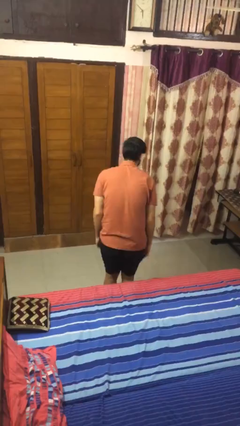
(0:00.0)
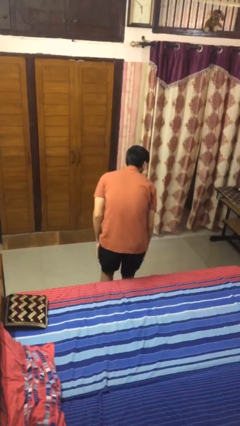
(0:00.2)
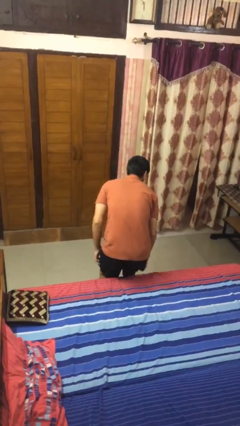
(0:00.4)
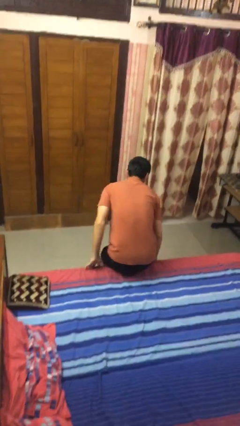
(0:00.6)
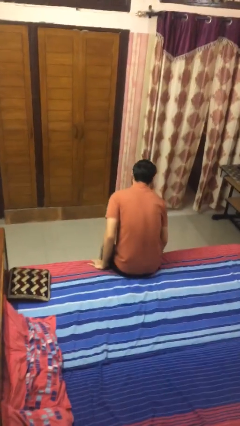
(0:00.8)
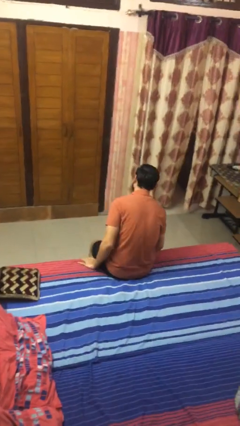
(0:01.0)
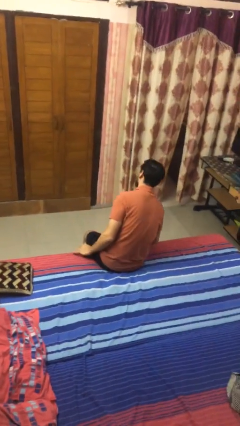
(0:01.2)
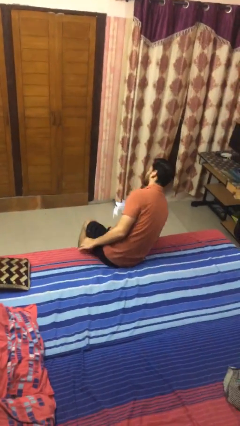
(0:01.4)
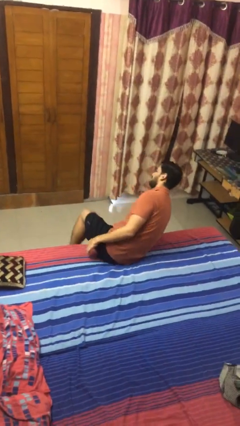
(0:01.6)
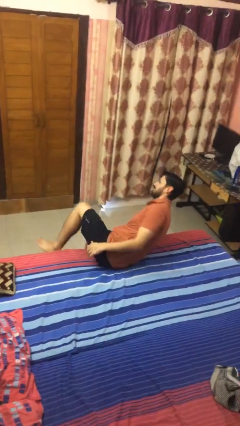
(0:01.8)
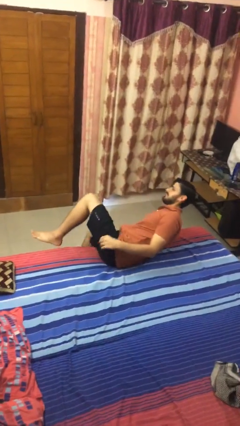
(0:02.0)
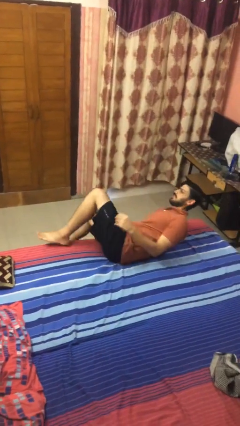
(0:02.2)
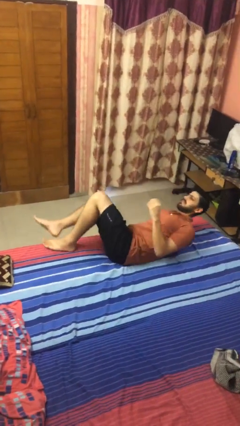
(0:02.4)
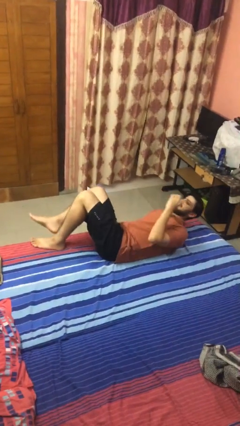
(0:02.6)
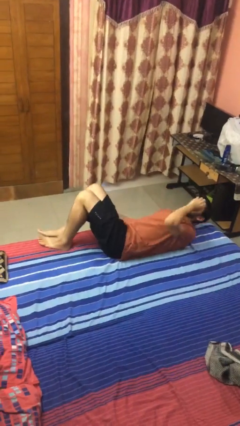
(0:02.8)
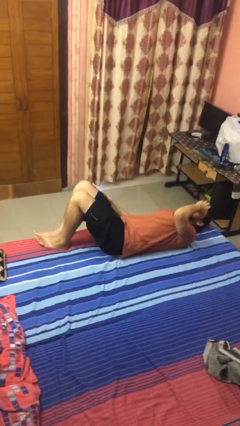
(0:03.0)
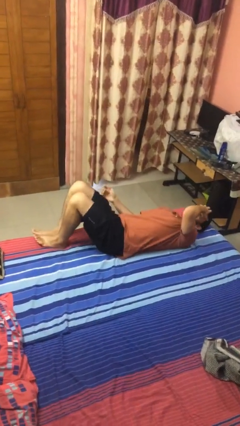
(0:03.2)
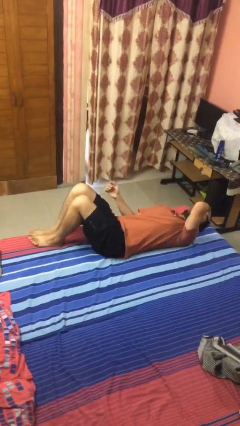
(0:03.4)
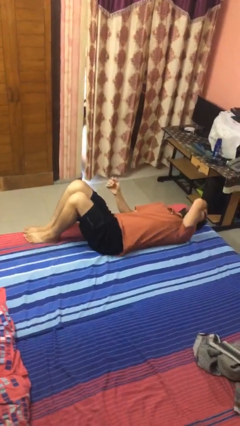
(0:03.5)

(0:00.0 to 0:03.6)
person lies down on bed

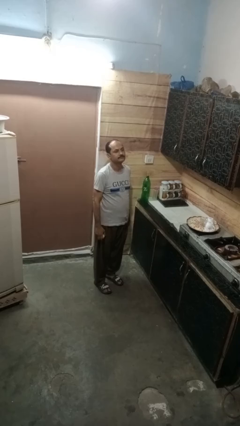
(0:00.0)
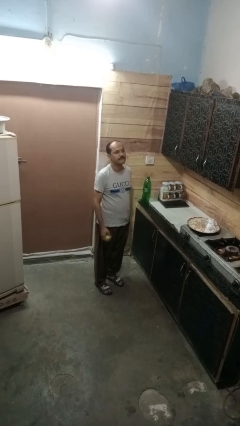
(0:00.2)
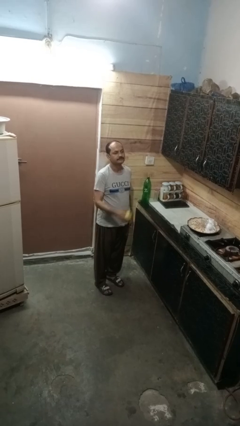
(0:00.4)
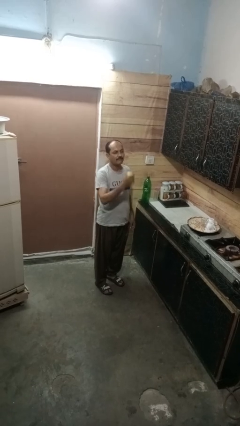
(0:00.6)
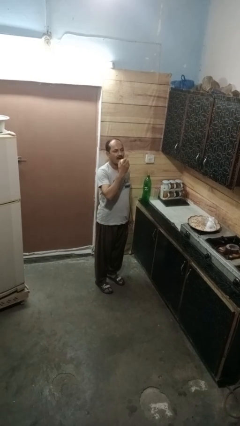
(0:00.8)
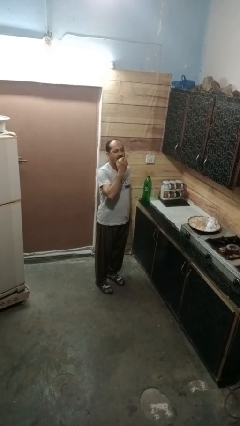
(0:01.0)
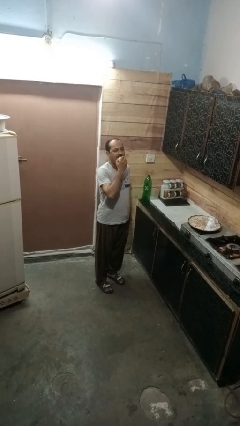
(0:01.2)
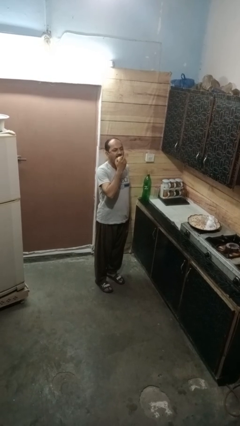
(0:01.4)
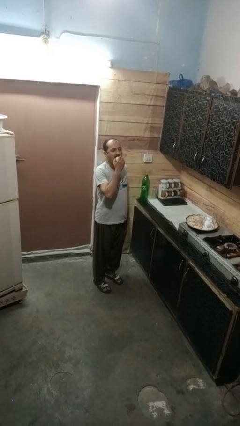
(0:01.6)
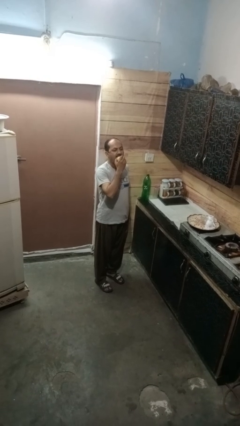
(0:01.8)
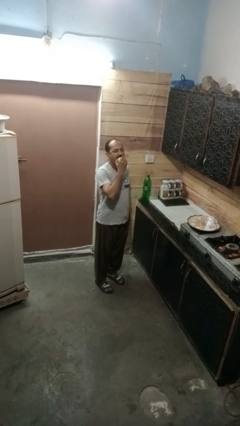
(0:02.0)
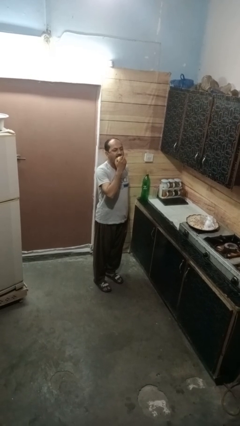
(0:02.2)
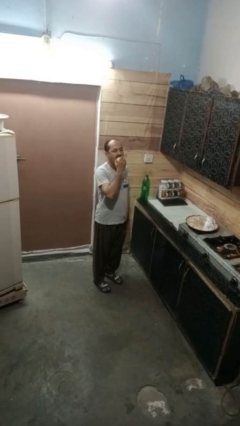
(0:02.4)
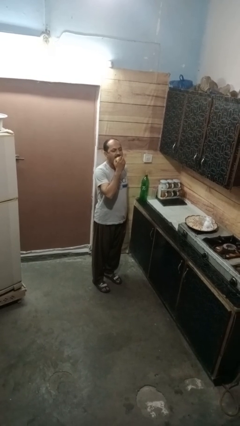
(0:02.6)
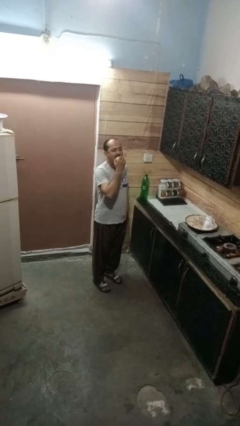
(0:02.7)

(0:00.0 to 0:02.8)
person eats apple

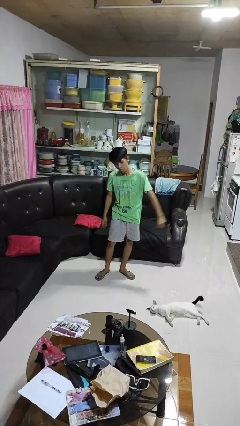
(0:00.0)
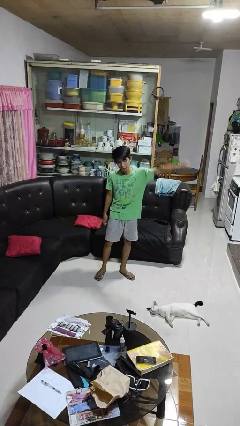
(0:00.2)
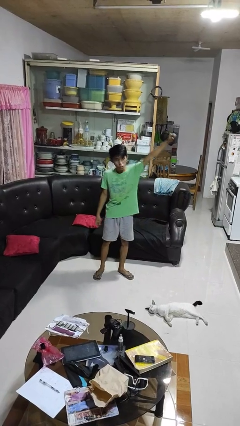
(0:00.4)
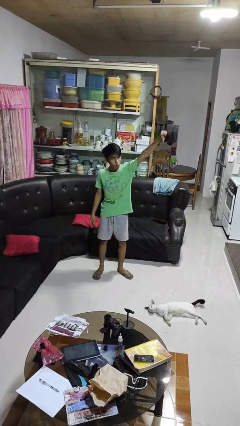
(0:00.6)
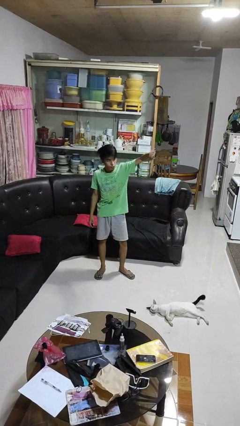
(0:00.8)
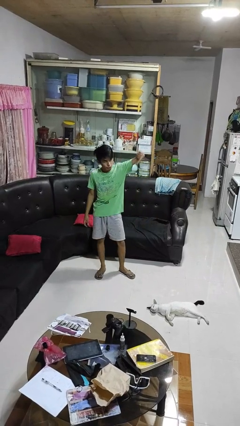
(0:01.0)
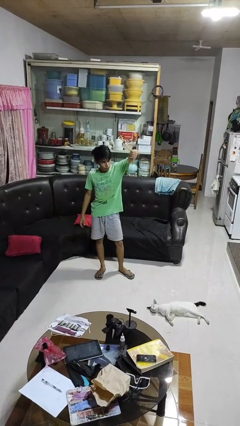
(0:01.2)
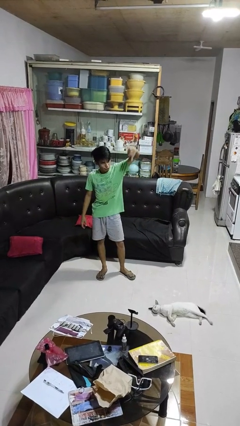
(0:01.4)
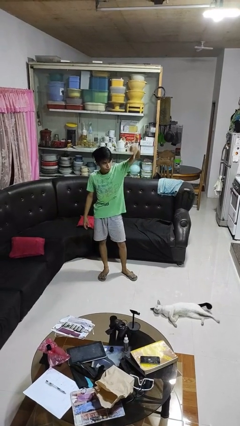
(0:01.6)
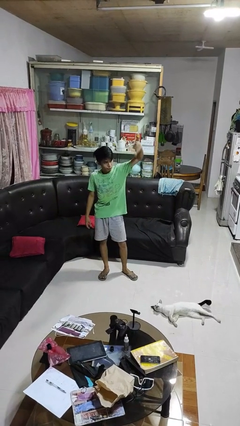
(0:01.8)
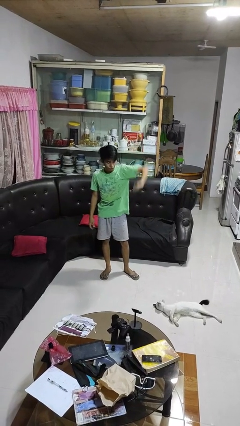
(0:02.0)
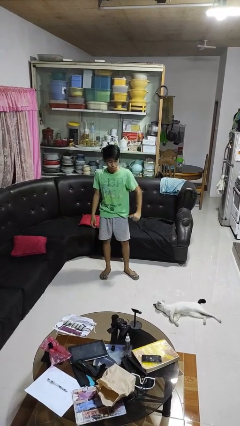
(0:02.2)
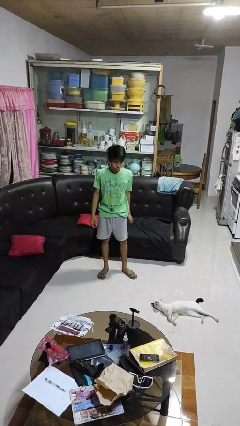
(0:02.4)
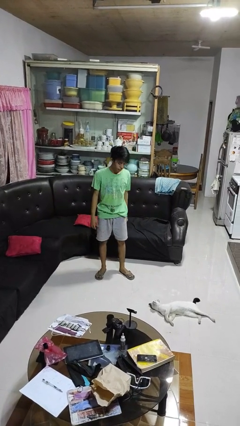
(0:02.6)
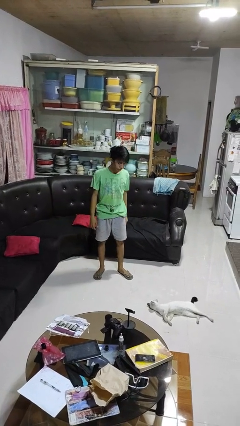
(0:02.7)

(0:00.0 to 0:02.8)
person gestures thumbs down

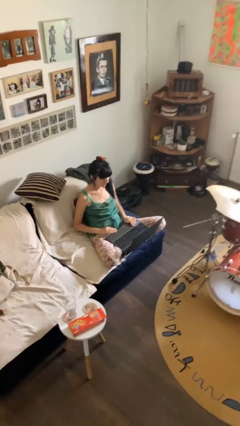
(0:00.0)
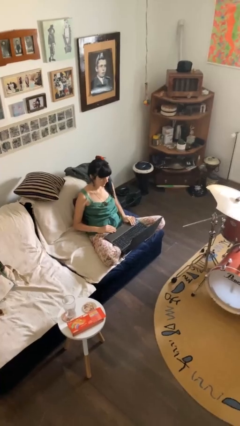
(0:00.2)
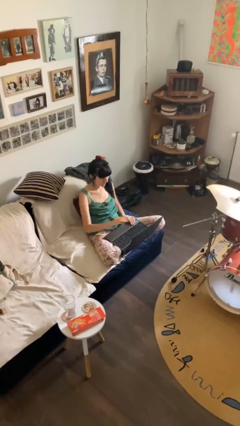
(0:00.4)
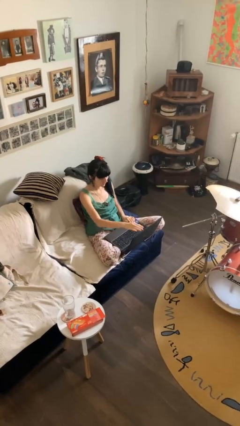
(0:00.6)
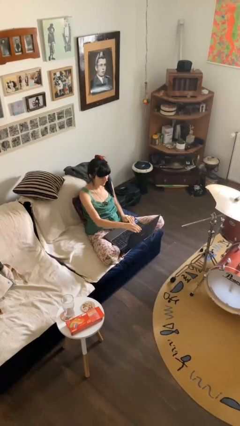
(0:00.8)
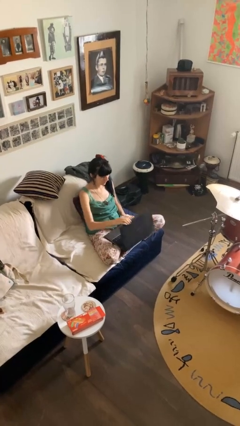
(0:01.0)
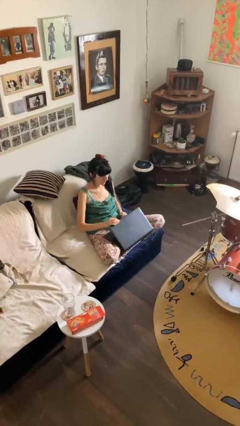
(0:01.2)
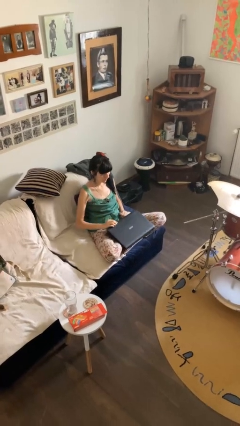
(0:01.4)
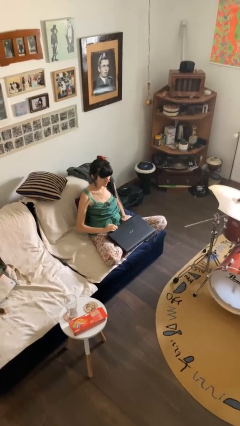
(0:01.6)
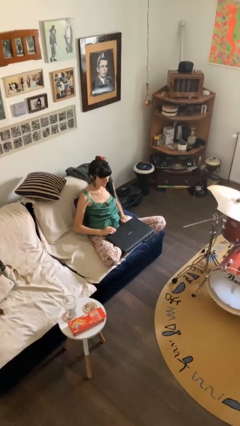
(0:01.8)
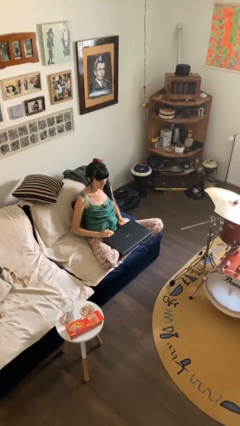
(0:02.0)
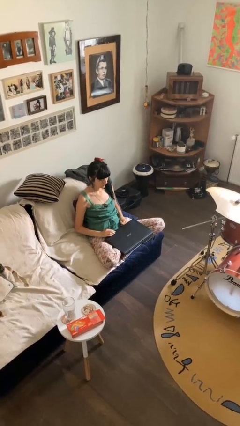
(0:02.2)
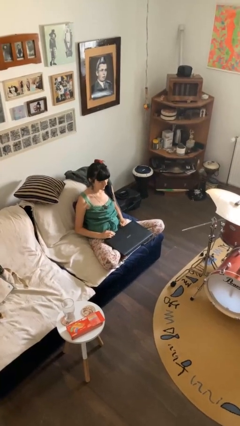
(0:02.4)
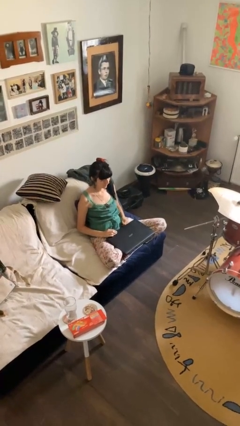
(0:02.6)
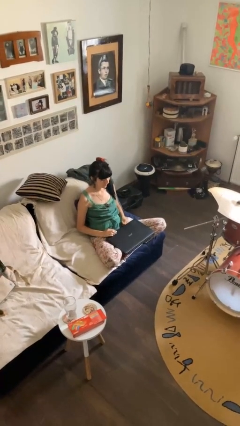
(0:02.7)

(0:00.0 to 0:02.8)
person closes laptop

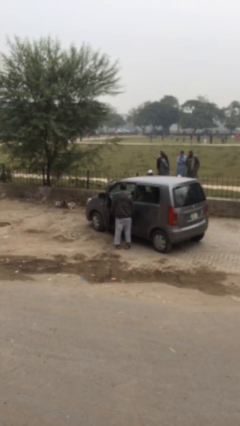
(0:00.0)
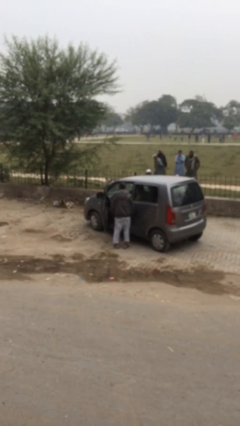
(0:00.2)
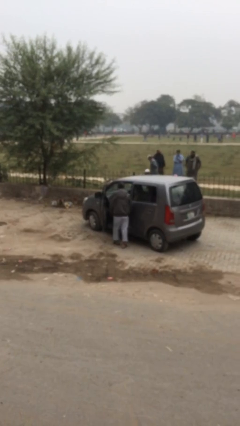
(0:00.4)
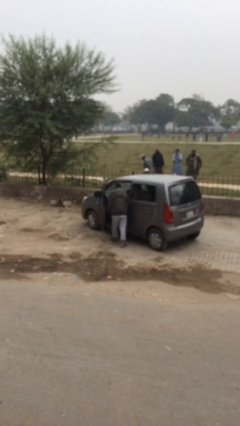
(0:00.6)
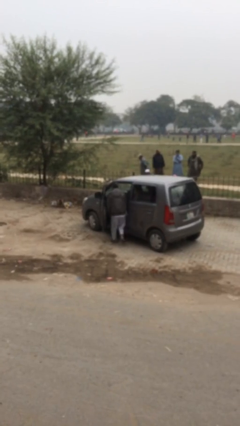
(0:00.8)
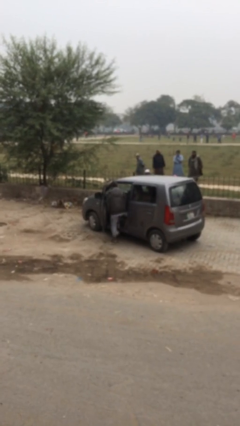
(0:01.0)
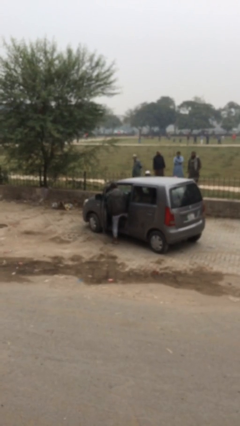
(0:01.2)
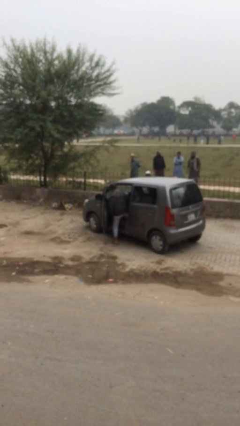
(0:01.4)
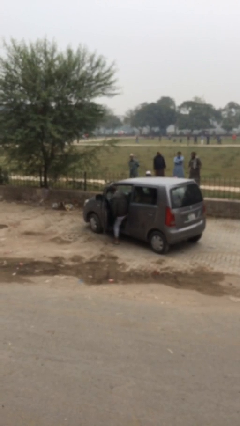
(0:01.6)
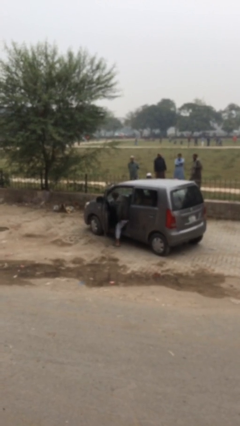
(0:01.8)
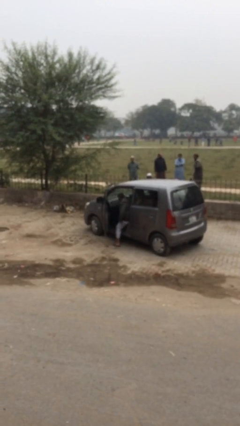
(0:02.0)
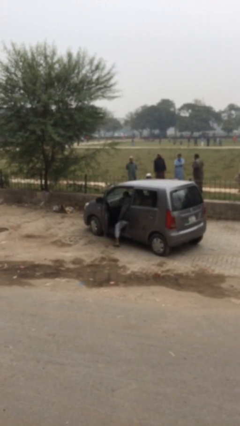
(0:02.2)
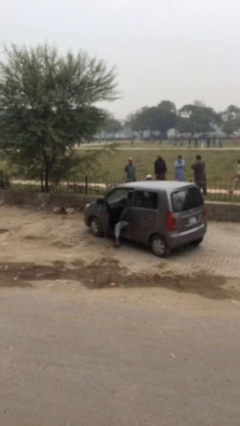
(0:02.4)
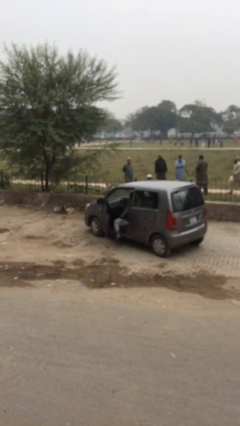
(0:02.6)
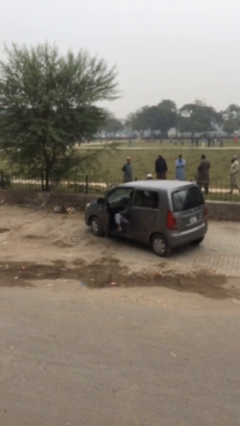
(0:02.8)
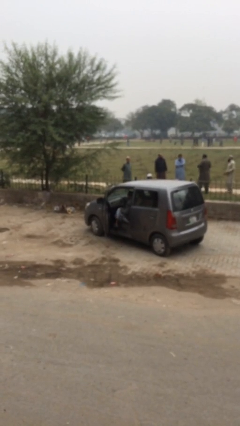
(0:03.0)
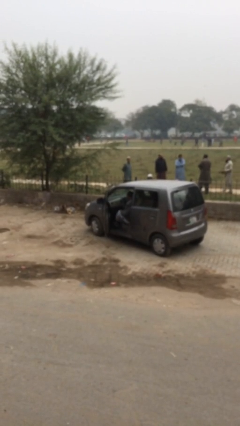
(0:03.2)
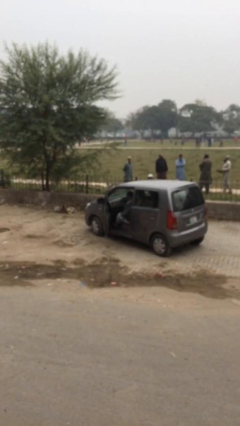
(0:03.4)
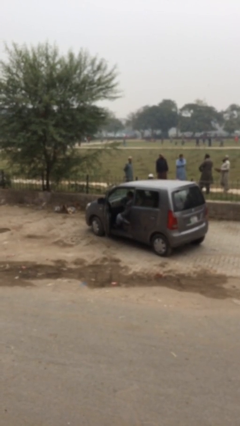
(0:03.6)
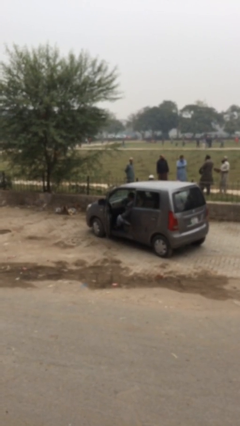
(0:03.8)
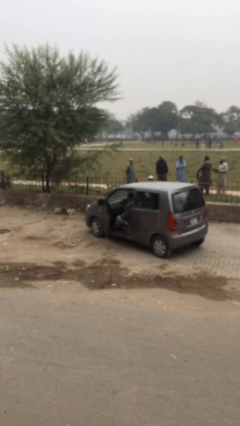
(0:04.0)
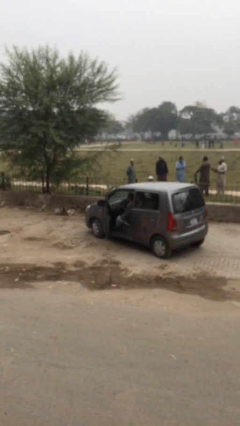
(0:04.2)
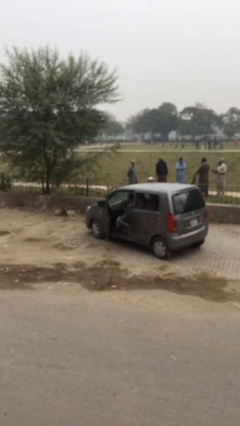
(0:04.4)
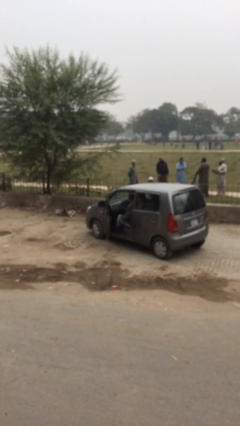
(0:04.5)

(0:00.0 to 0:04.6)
person enters car

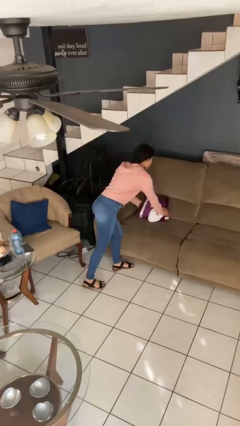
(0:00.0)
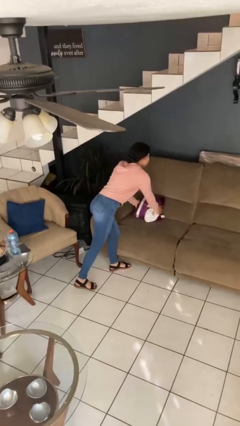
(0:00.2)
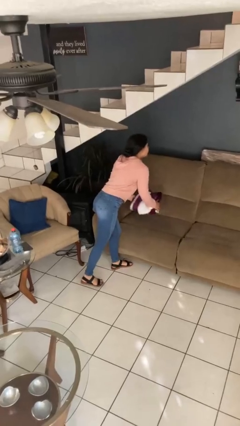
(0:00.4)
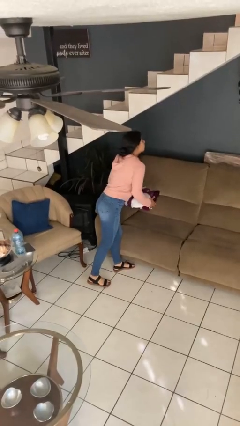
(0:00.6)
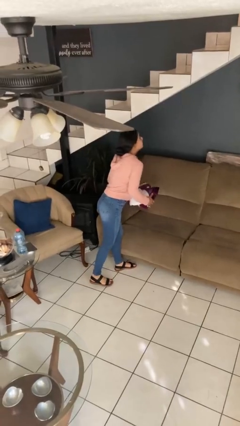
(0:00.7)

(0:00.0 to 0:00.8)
person picks up object from couch
